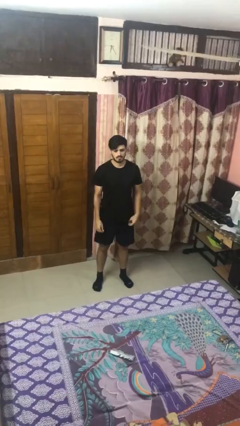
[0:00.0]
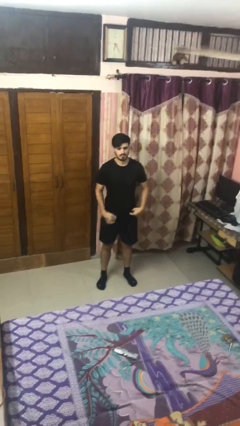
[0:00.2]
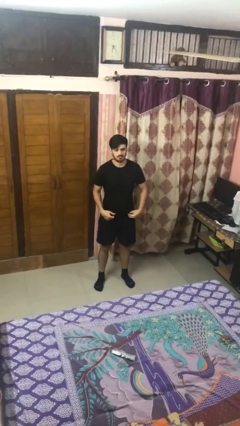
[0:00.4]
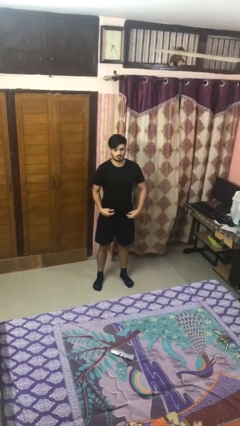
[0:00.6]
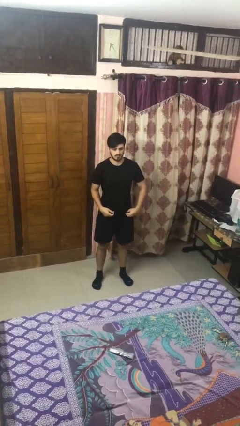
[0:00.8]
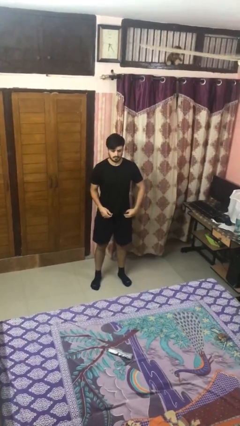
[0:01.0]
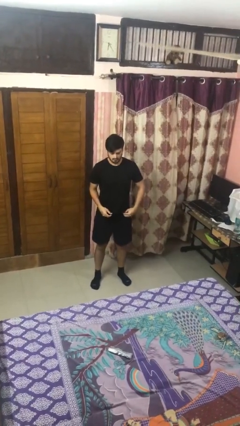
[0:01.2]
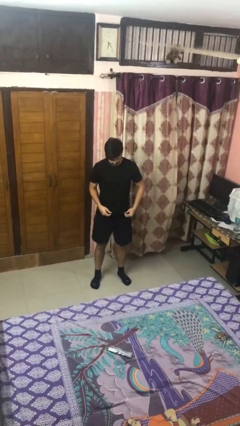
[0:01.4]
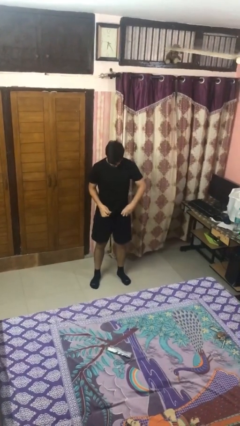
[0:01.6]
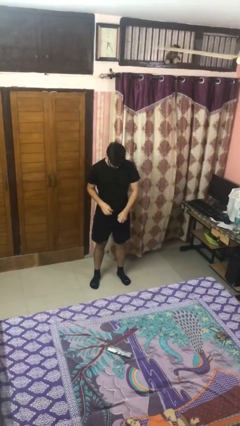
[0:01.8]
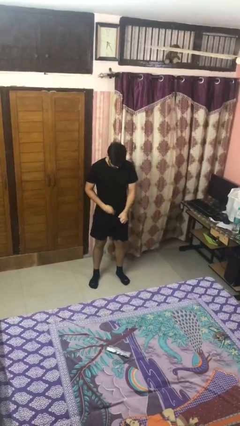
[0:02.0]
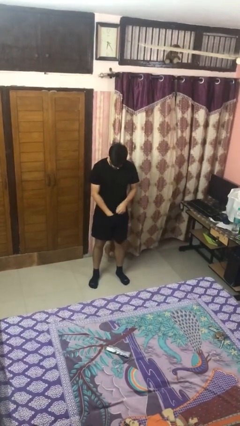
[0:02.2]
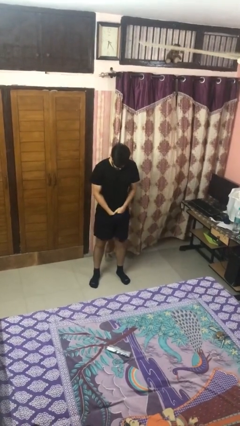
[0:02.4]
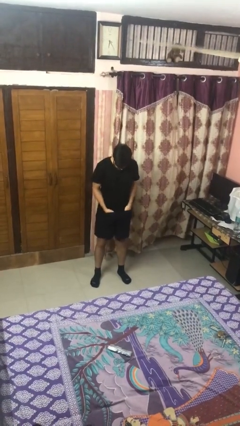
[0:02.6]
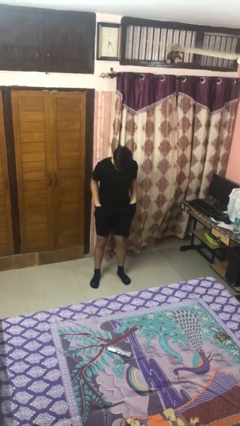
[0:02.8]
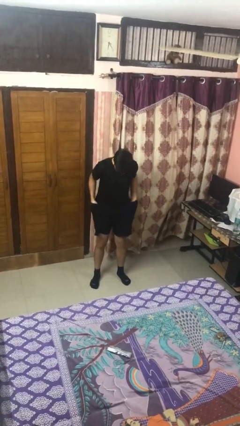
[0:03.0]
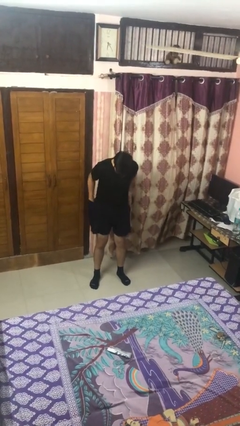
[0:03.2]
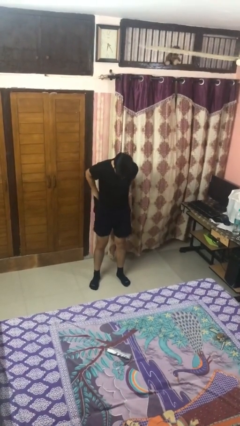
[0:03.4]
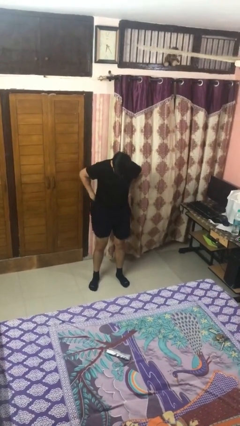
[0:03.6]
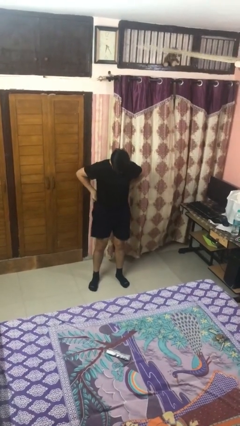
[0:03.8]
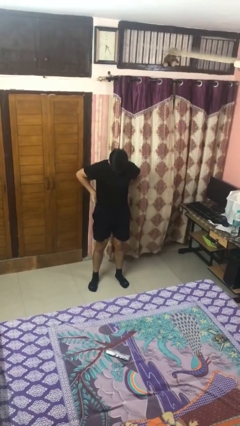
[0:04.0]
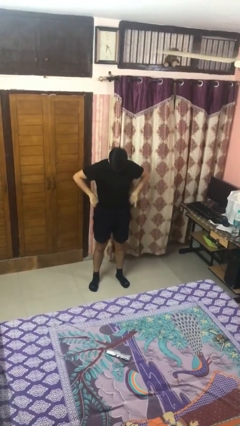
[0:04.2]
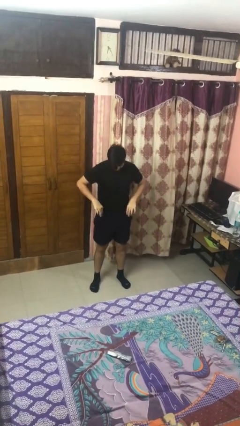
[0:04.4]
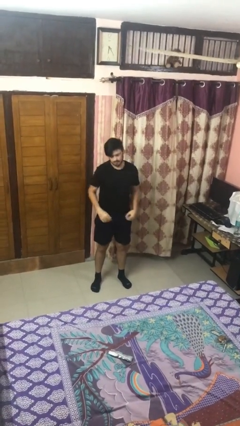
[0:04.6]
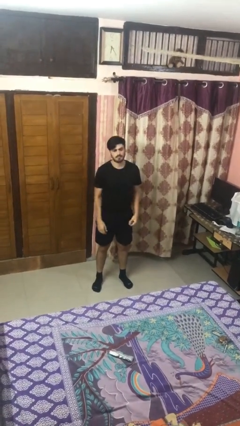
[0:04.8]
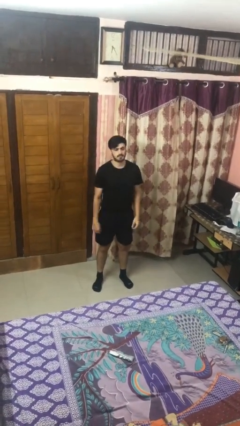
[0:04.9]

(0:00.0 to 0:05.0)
person tucks in shirt

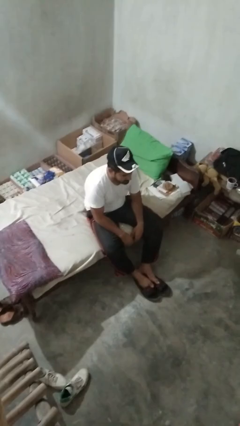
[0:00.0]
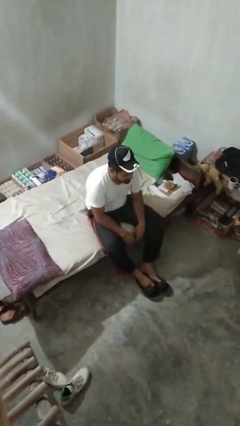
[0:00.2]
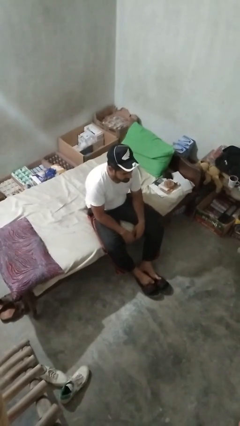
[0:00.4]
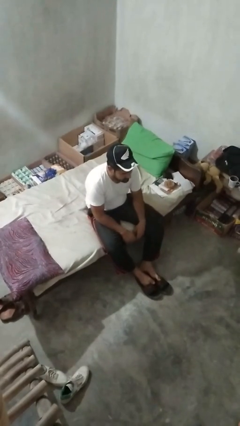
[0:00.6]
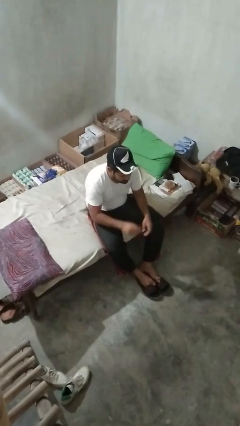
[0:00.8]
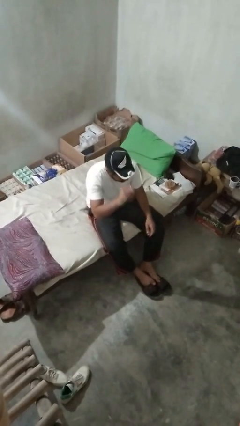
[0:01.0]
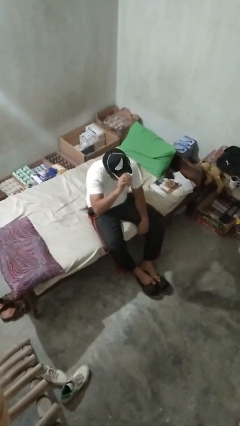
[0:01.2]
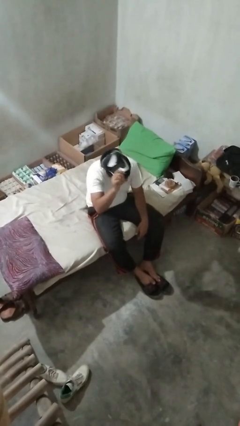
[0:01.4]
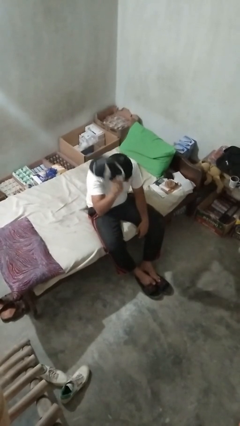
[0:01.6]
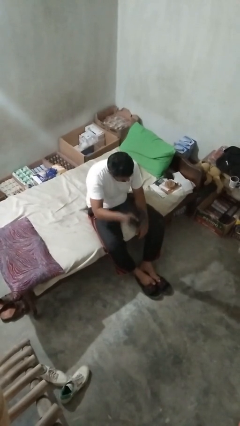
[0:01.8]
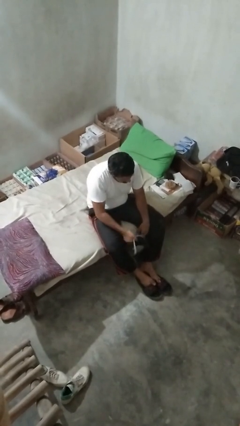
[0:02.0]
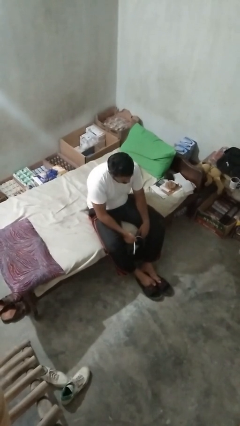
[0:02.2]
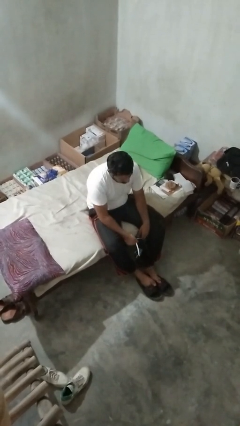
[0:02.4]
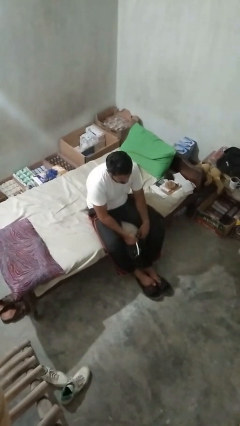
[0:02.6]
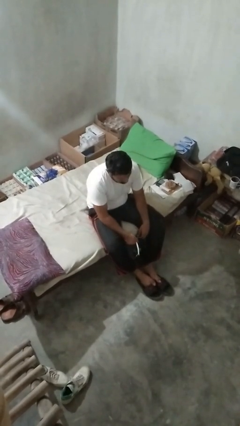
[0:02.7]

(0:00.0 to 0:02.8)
person takes off hat

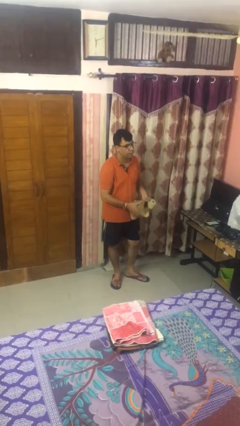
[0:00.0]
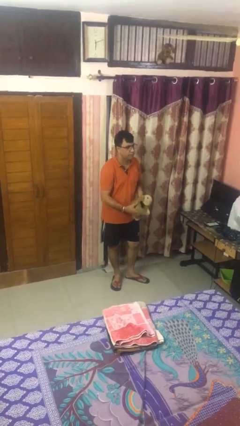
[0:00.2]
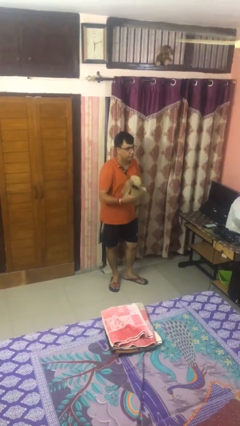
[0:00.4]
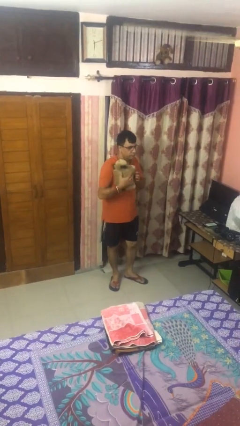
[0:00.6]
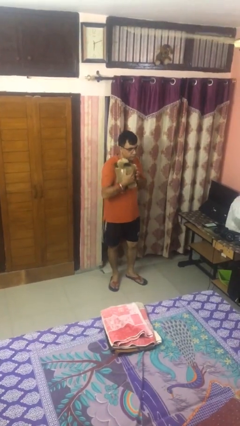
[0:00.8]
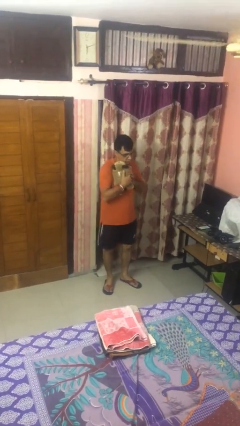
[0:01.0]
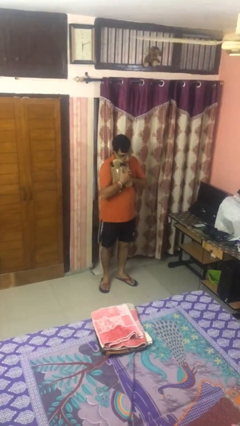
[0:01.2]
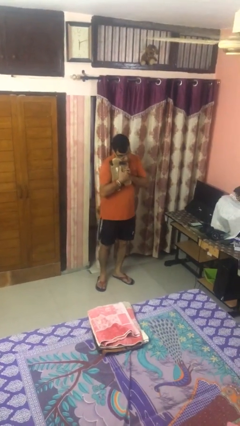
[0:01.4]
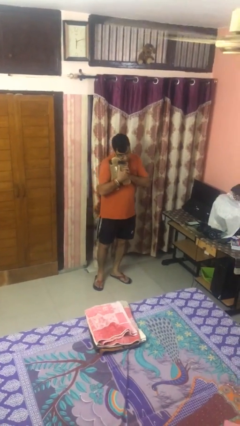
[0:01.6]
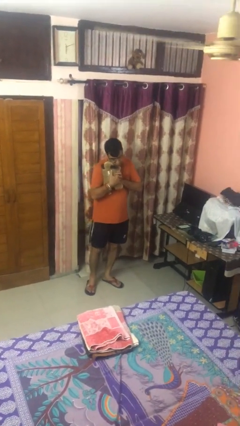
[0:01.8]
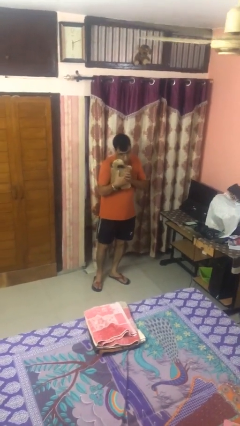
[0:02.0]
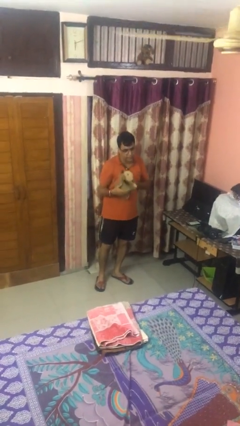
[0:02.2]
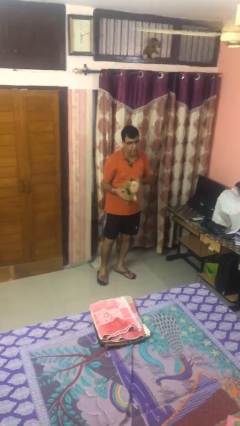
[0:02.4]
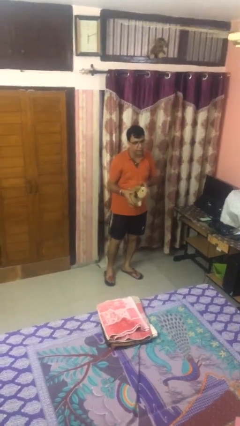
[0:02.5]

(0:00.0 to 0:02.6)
person hugs stuffed animal

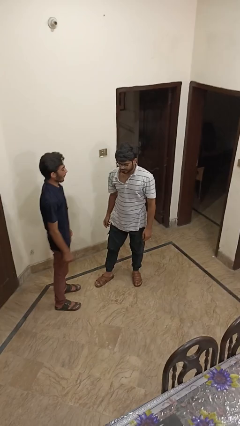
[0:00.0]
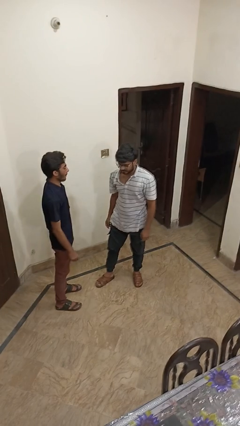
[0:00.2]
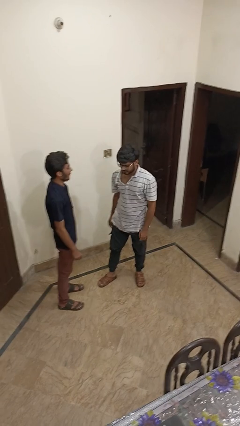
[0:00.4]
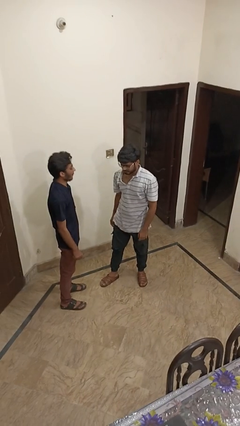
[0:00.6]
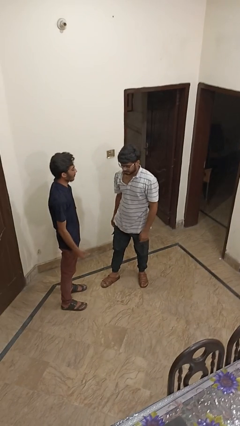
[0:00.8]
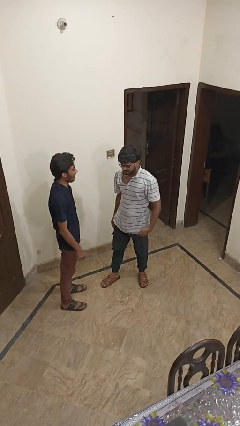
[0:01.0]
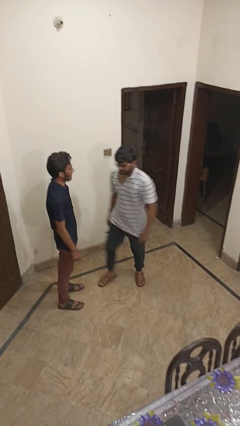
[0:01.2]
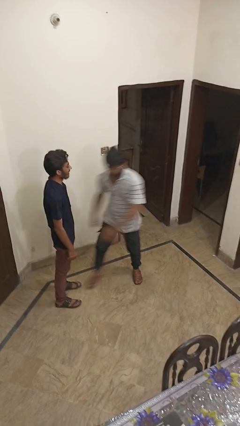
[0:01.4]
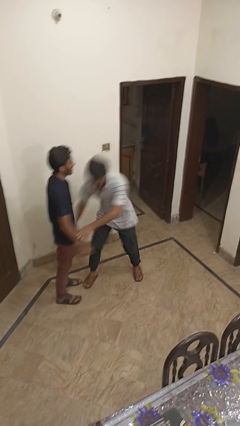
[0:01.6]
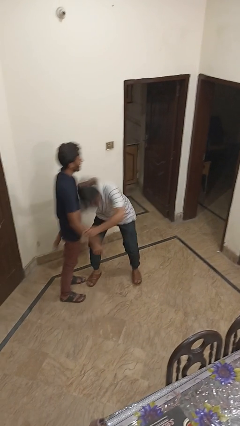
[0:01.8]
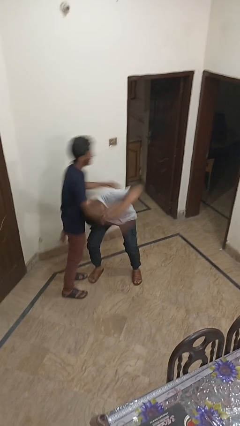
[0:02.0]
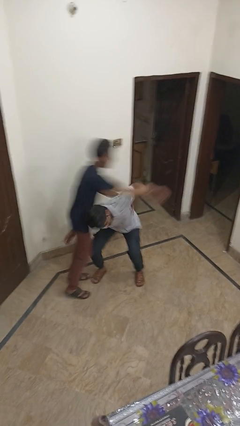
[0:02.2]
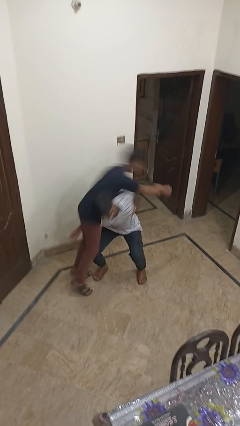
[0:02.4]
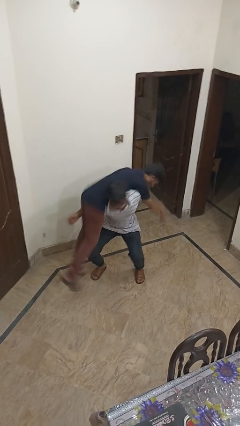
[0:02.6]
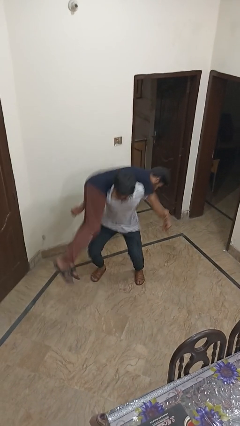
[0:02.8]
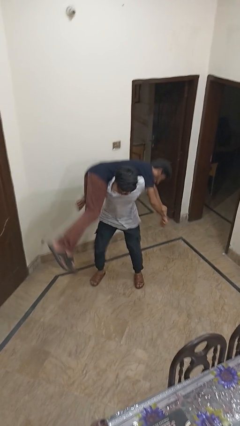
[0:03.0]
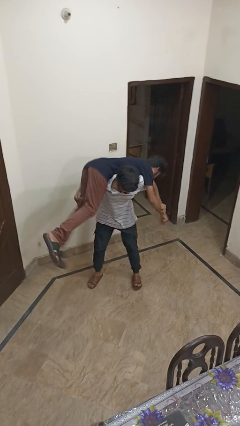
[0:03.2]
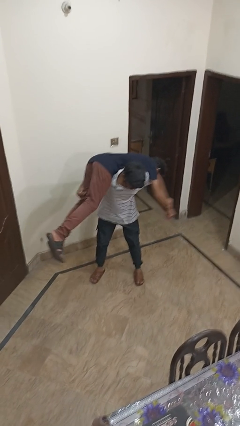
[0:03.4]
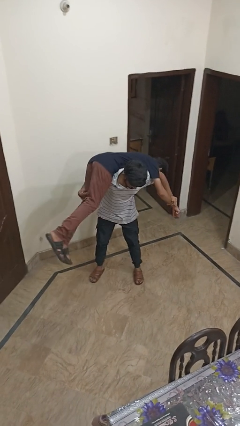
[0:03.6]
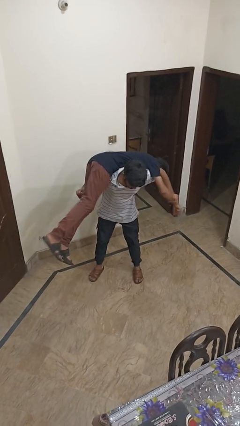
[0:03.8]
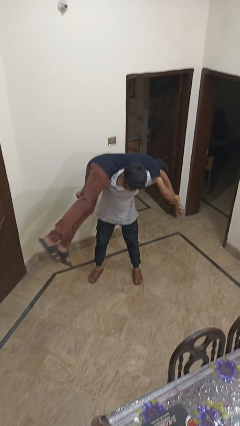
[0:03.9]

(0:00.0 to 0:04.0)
person carries person over shoulder

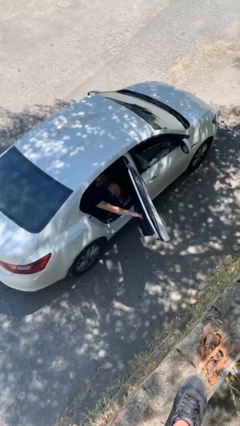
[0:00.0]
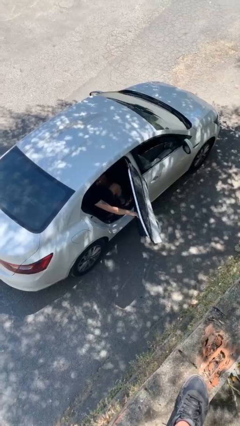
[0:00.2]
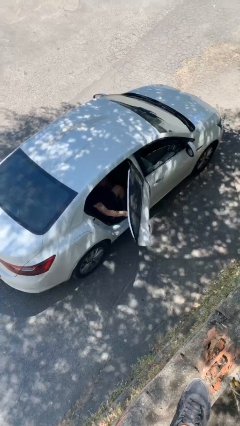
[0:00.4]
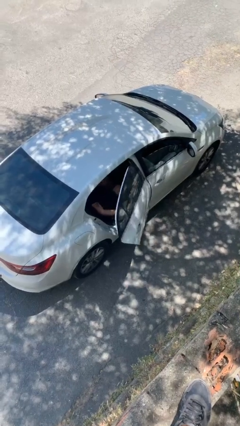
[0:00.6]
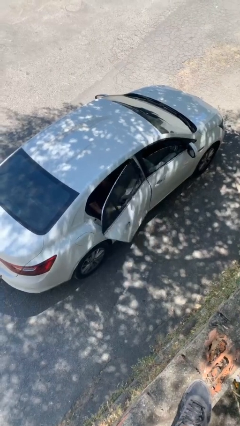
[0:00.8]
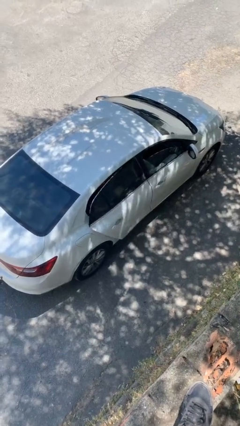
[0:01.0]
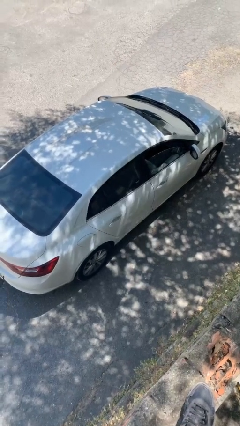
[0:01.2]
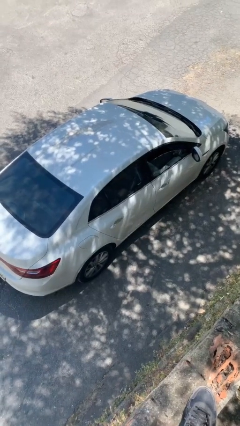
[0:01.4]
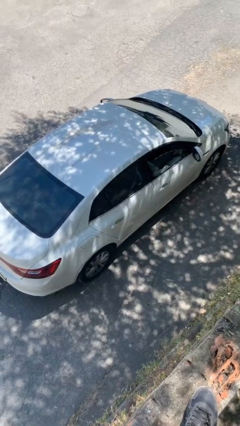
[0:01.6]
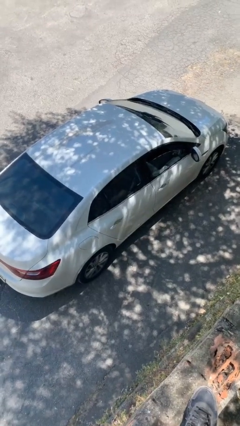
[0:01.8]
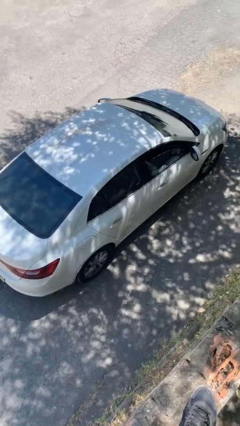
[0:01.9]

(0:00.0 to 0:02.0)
person closes car door

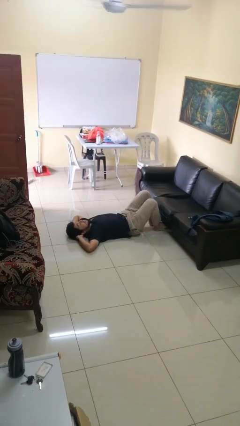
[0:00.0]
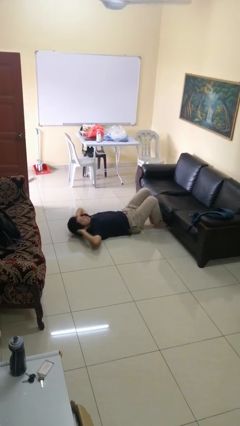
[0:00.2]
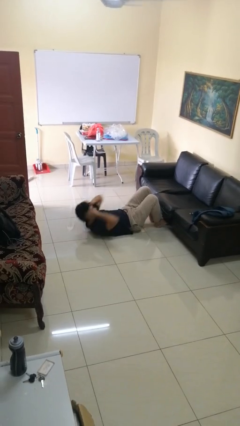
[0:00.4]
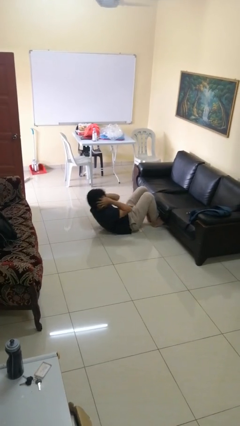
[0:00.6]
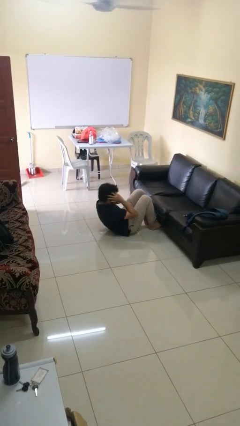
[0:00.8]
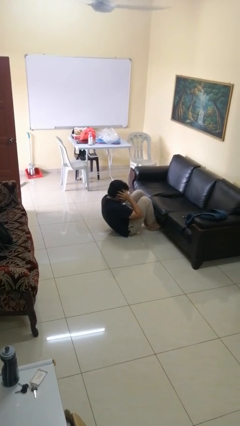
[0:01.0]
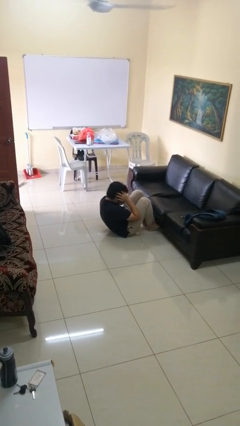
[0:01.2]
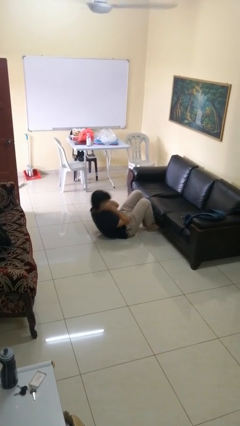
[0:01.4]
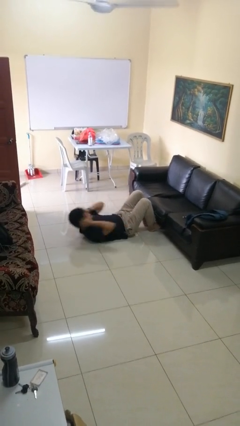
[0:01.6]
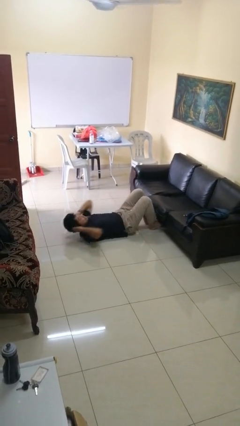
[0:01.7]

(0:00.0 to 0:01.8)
person exercises with situp
